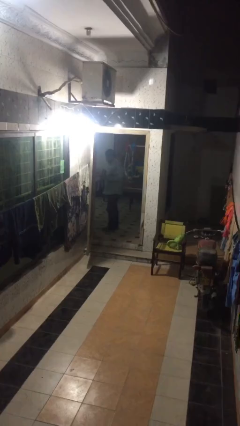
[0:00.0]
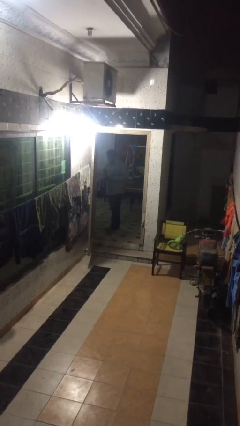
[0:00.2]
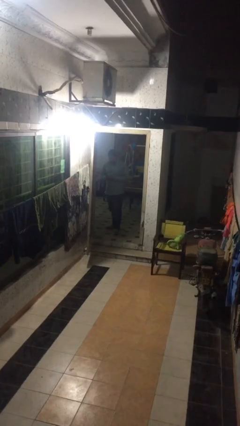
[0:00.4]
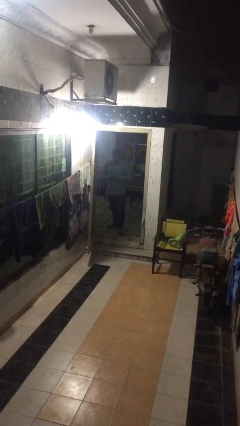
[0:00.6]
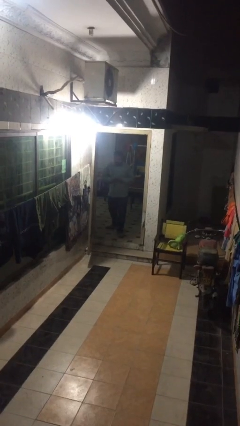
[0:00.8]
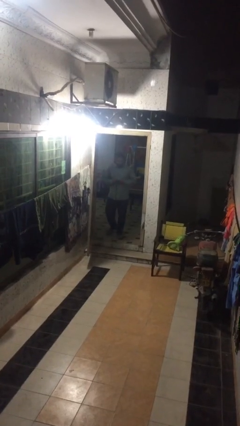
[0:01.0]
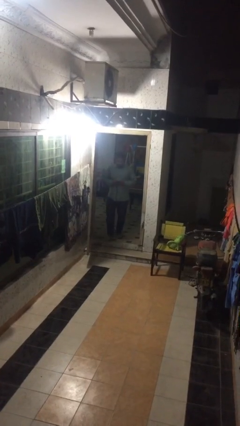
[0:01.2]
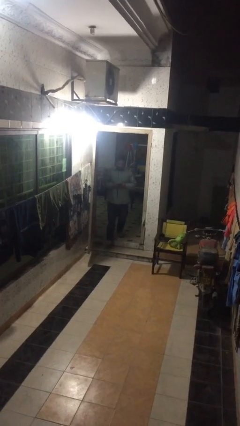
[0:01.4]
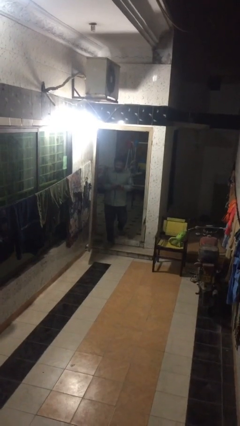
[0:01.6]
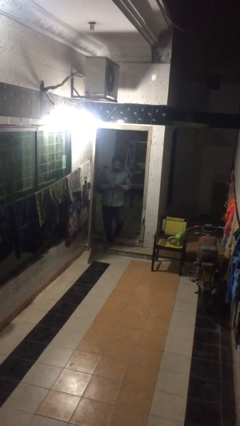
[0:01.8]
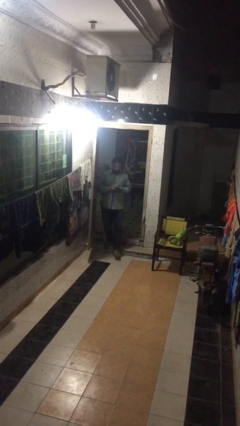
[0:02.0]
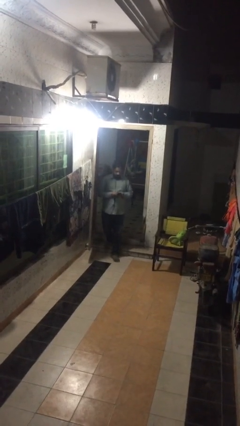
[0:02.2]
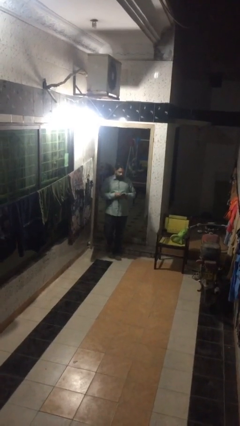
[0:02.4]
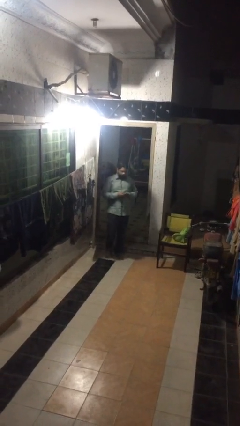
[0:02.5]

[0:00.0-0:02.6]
person enters scene through structure

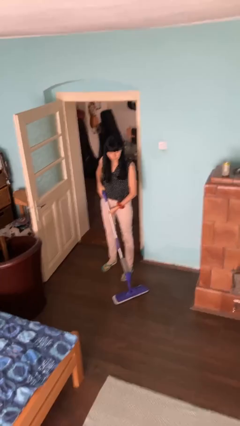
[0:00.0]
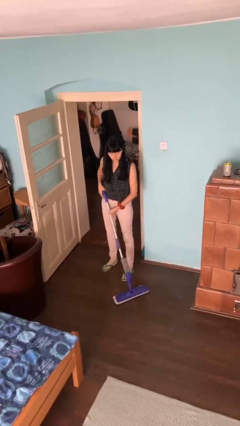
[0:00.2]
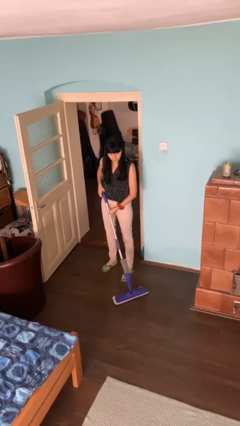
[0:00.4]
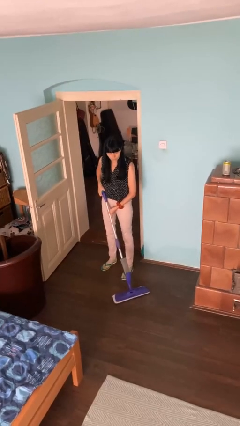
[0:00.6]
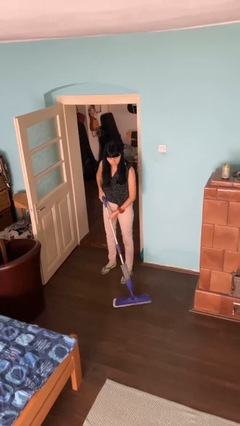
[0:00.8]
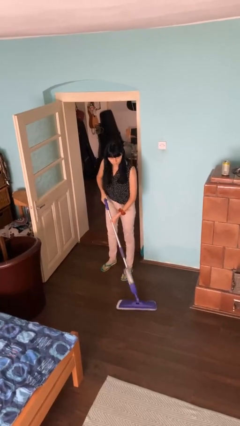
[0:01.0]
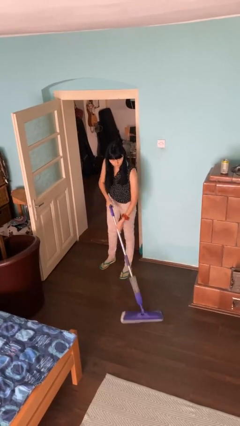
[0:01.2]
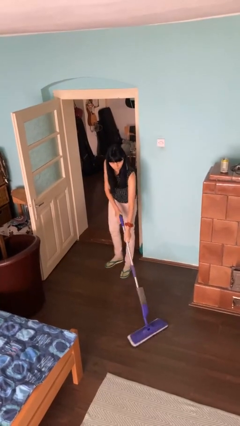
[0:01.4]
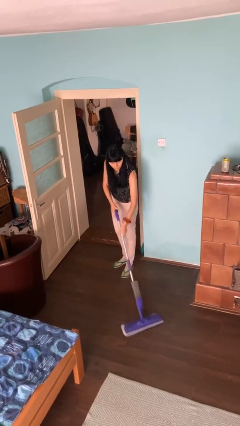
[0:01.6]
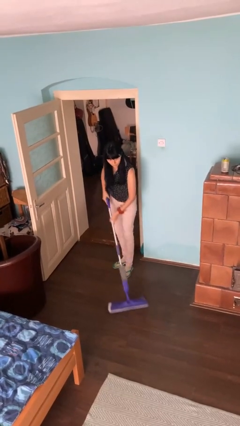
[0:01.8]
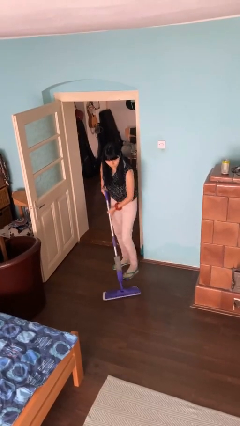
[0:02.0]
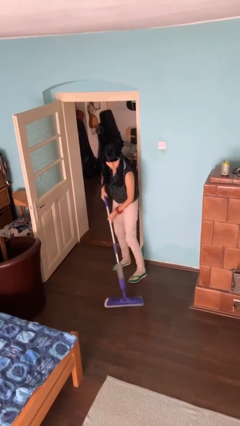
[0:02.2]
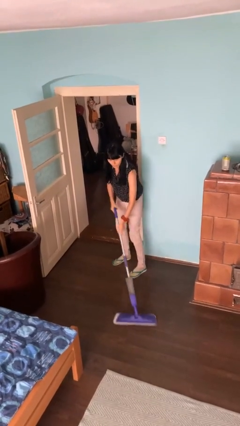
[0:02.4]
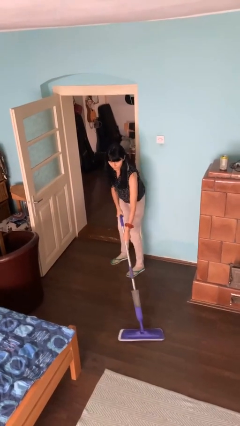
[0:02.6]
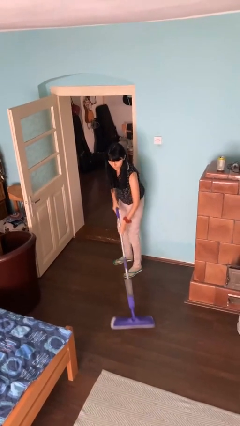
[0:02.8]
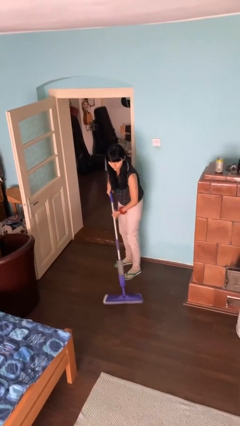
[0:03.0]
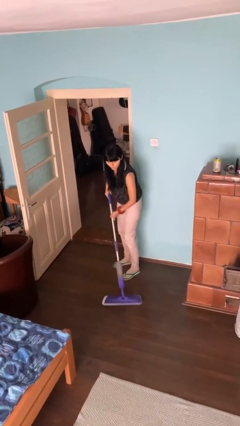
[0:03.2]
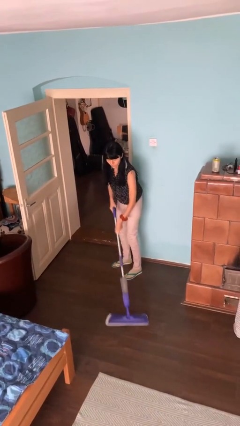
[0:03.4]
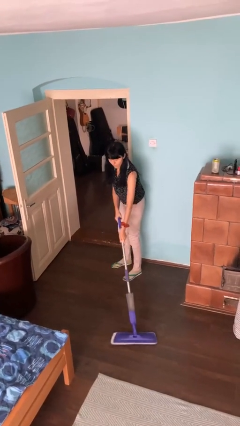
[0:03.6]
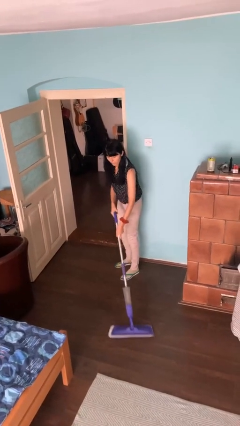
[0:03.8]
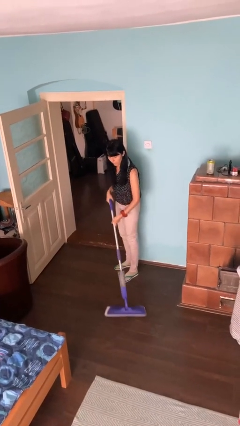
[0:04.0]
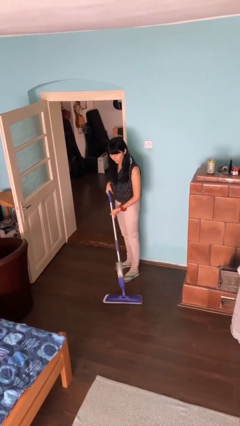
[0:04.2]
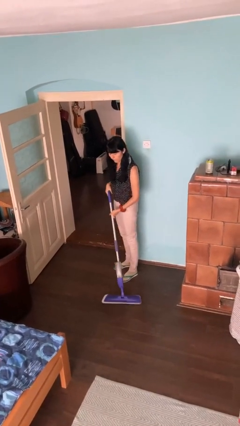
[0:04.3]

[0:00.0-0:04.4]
person mops

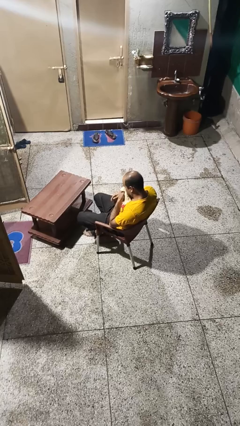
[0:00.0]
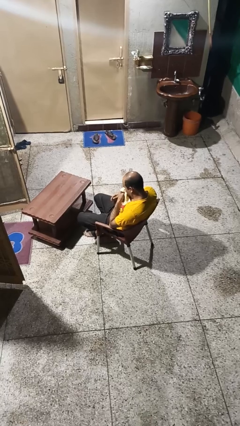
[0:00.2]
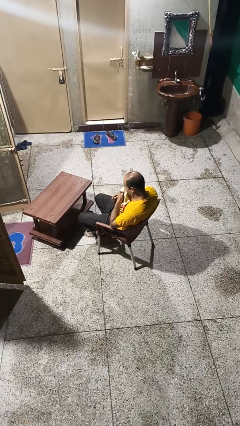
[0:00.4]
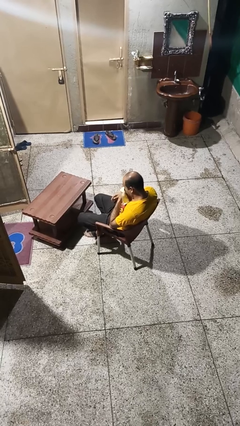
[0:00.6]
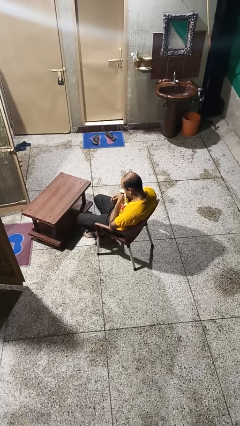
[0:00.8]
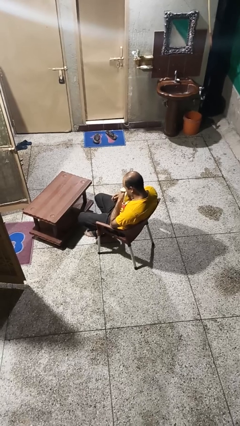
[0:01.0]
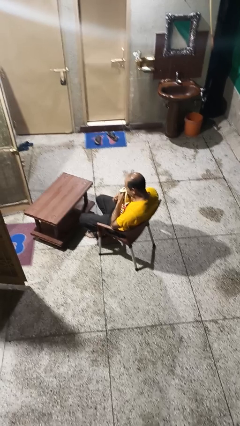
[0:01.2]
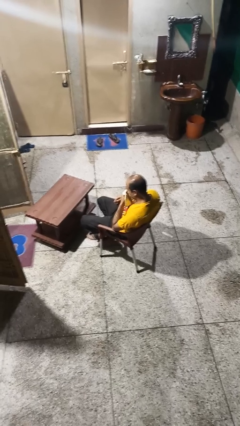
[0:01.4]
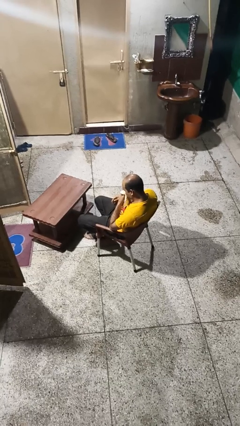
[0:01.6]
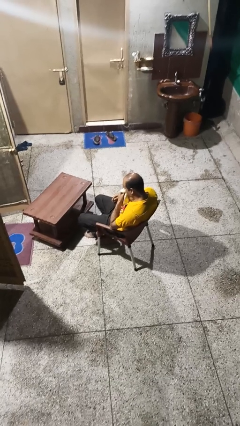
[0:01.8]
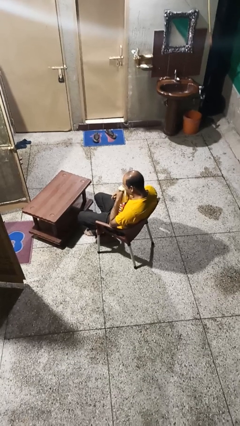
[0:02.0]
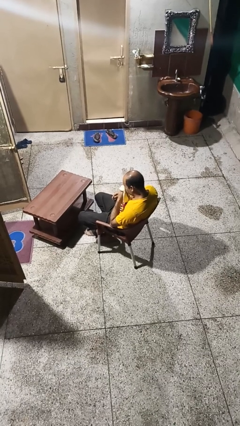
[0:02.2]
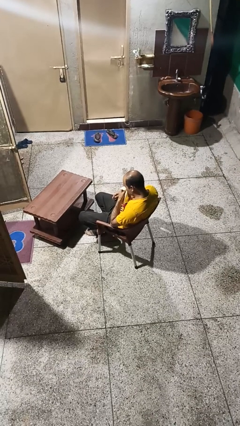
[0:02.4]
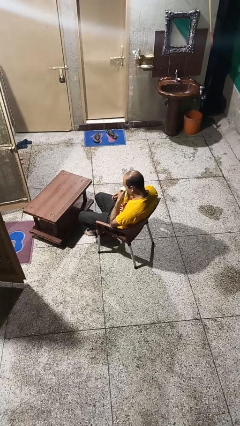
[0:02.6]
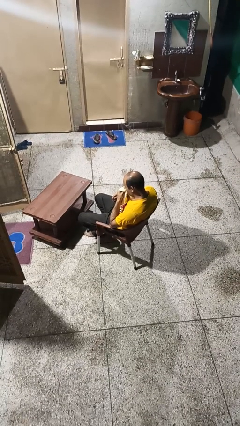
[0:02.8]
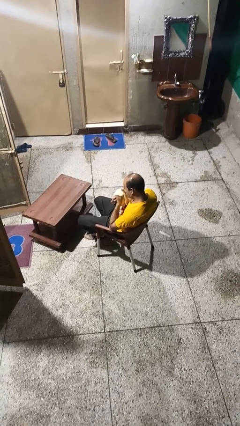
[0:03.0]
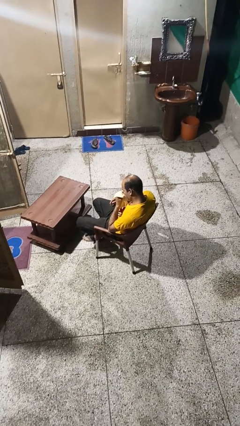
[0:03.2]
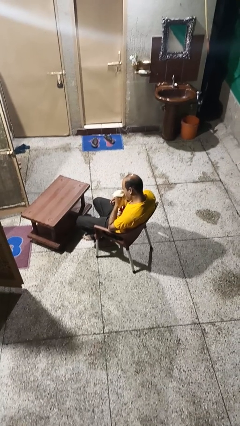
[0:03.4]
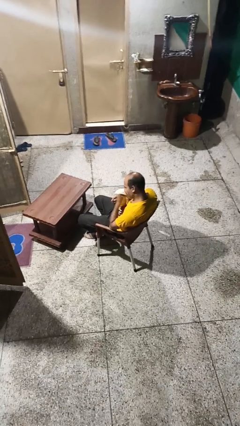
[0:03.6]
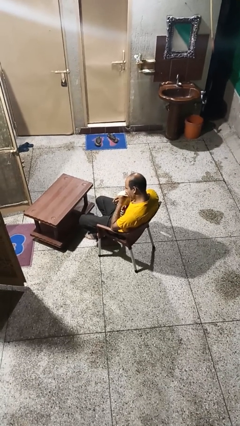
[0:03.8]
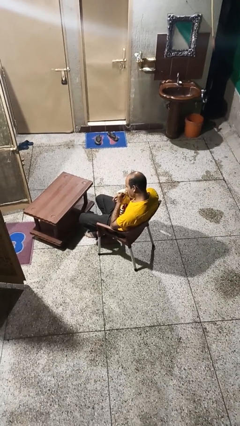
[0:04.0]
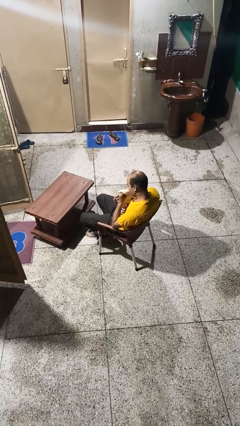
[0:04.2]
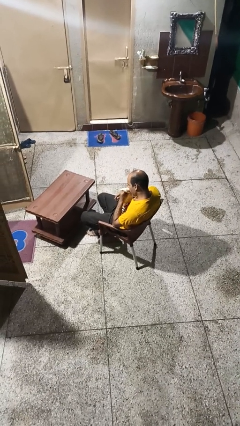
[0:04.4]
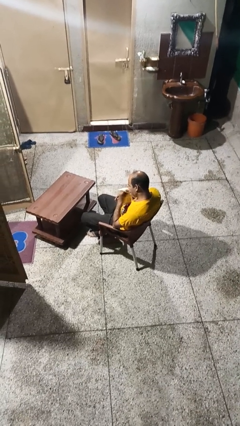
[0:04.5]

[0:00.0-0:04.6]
person blows nose

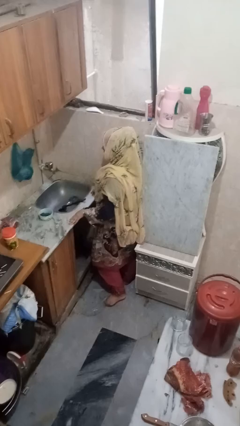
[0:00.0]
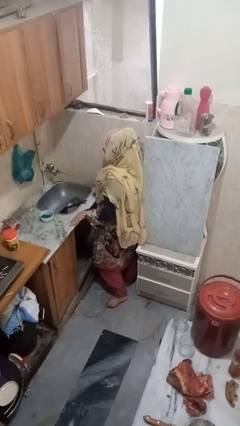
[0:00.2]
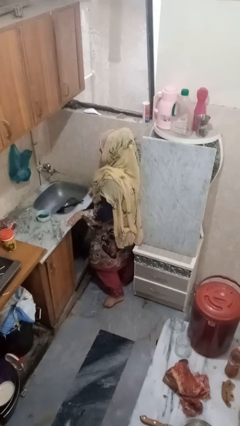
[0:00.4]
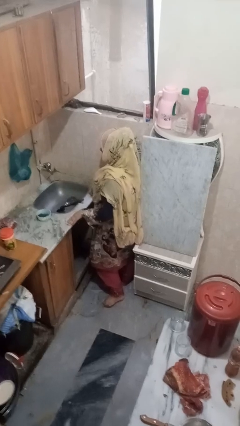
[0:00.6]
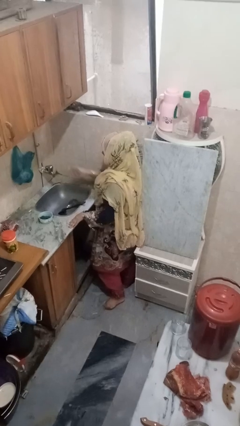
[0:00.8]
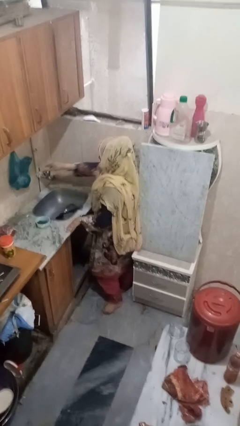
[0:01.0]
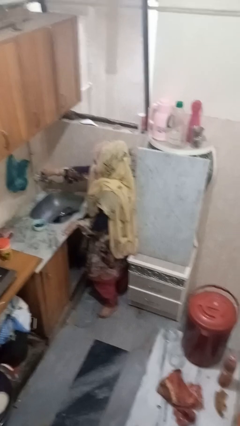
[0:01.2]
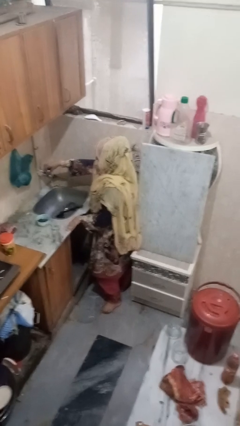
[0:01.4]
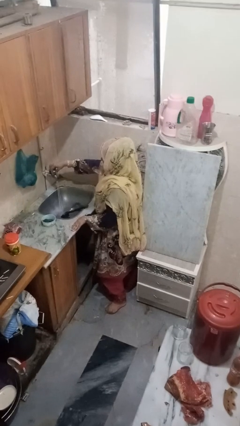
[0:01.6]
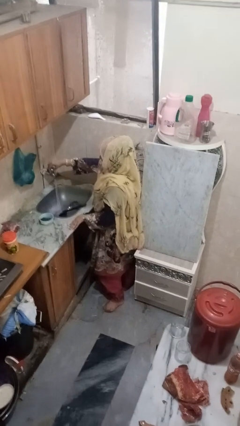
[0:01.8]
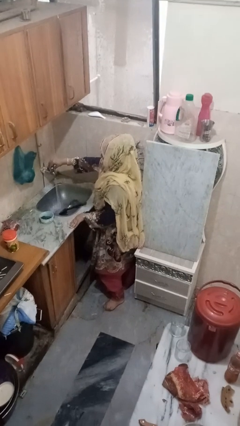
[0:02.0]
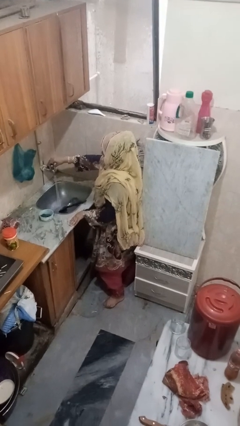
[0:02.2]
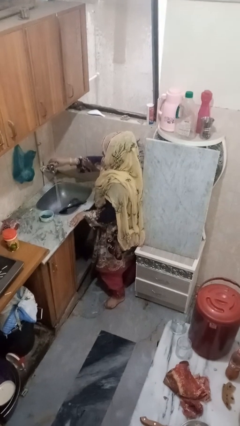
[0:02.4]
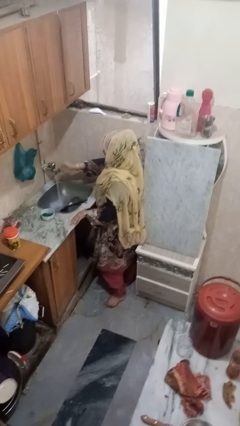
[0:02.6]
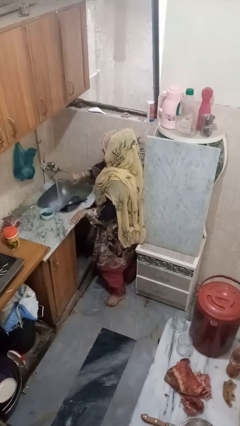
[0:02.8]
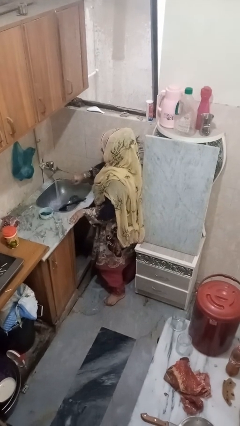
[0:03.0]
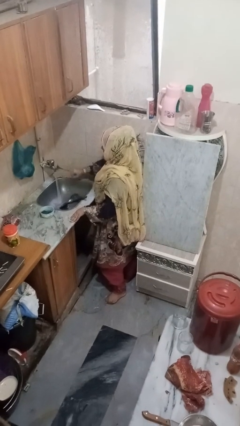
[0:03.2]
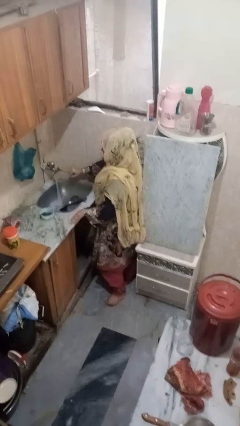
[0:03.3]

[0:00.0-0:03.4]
person turns on faucet

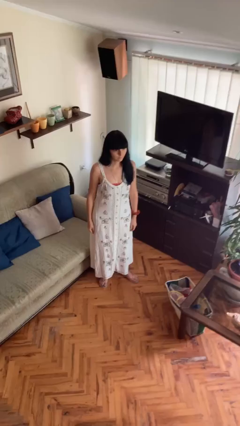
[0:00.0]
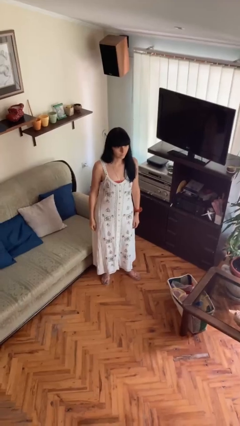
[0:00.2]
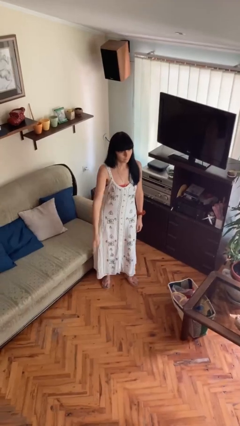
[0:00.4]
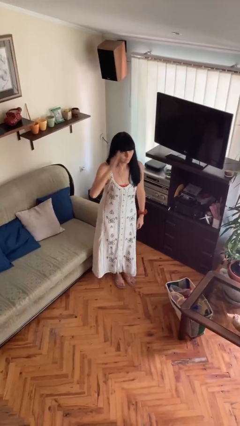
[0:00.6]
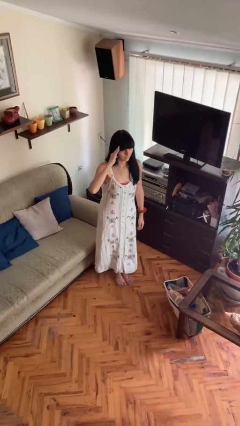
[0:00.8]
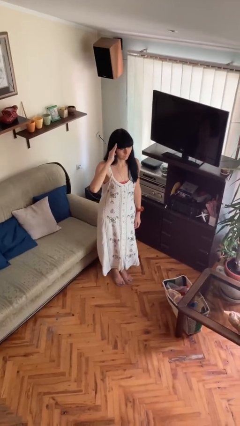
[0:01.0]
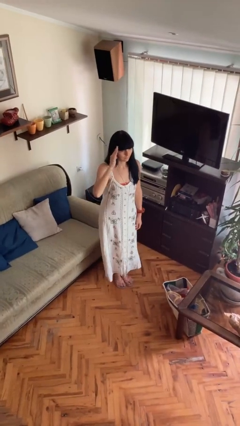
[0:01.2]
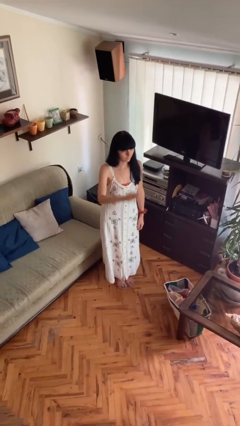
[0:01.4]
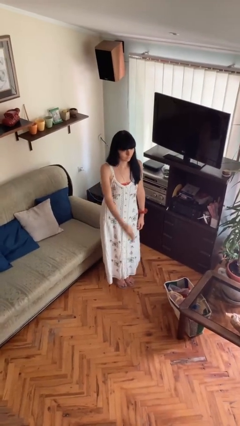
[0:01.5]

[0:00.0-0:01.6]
person salutes

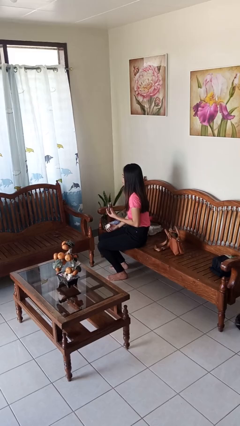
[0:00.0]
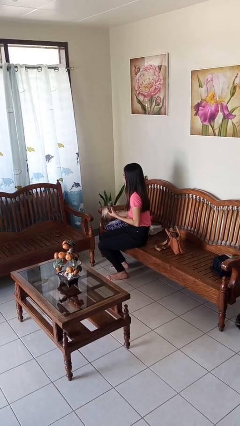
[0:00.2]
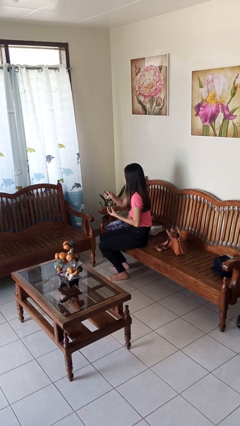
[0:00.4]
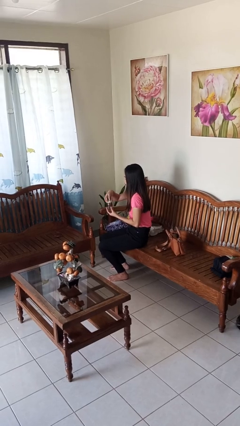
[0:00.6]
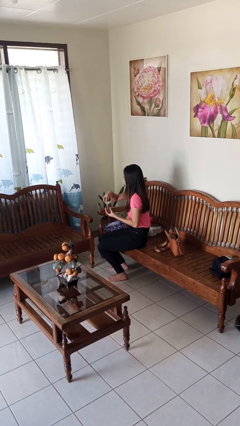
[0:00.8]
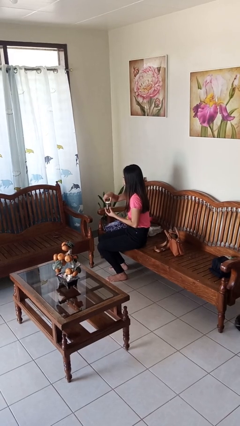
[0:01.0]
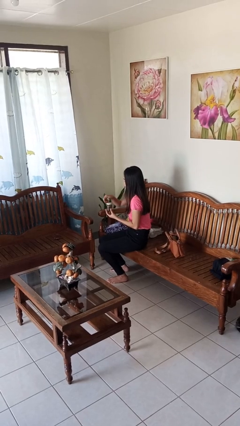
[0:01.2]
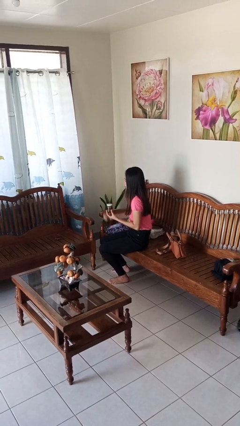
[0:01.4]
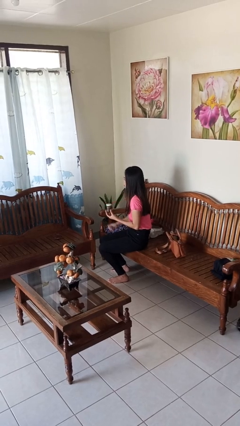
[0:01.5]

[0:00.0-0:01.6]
person closes jar
